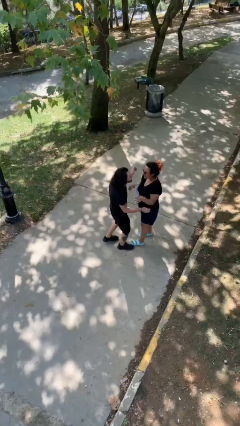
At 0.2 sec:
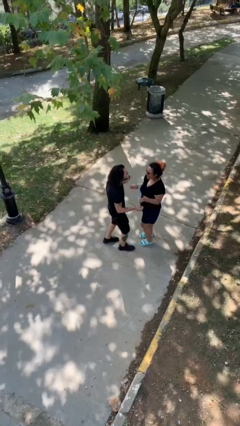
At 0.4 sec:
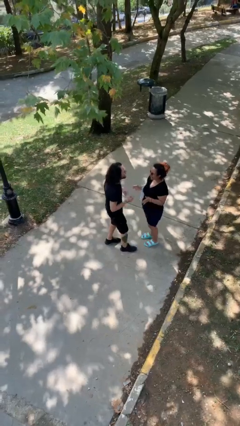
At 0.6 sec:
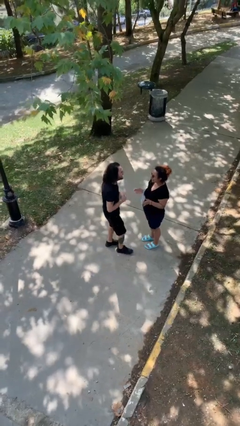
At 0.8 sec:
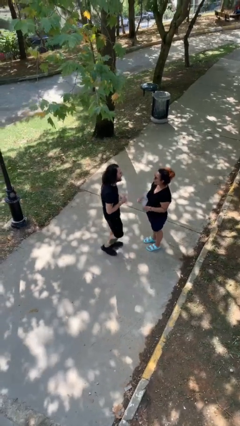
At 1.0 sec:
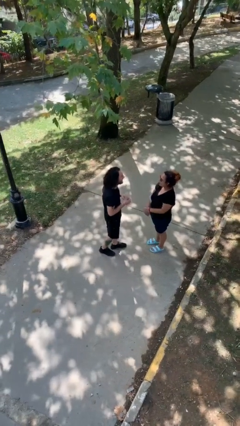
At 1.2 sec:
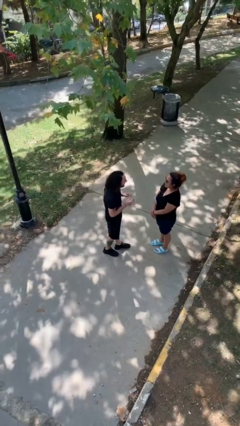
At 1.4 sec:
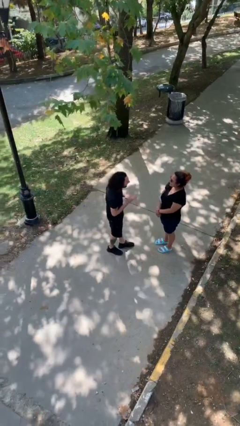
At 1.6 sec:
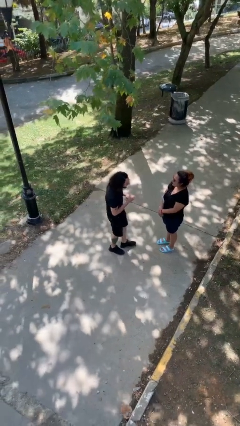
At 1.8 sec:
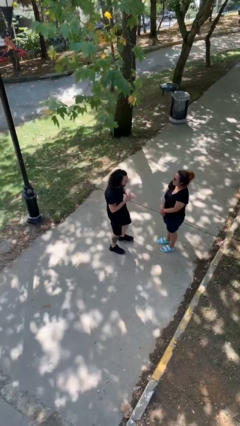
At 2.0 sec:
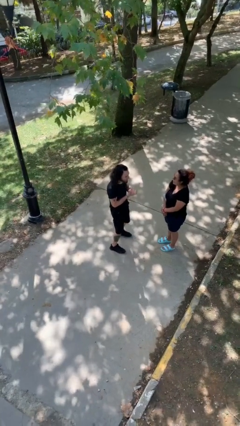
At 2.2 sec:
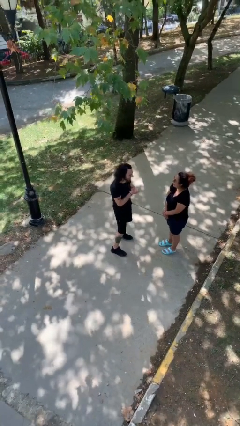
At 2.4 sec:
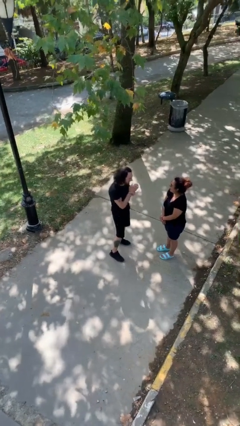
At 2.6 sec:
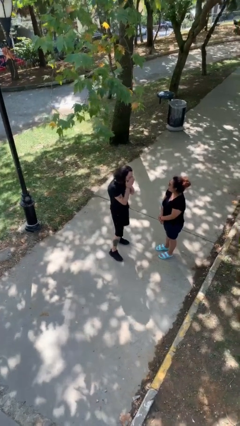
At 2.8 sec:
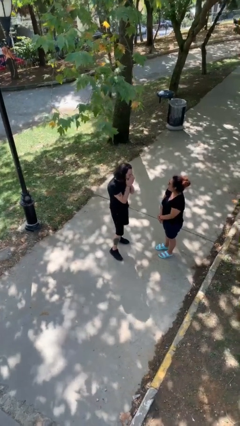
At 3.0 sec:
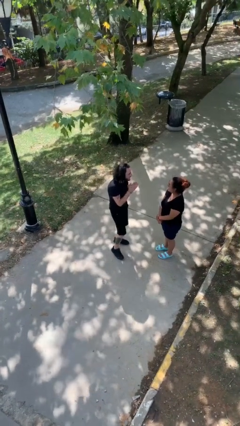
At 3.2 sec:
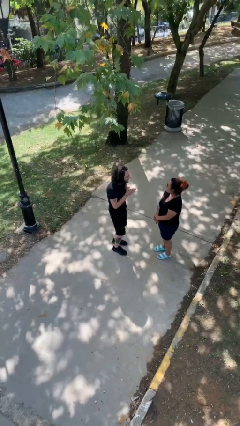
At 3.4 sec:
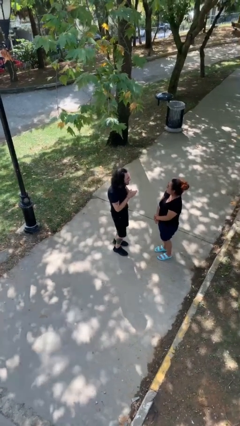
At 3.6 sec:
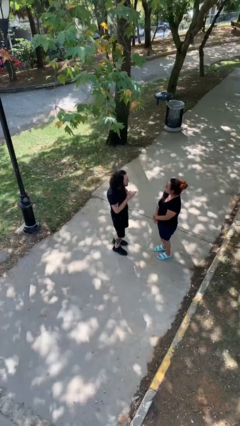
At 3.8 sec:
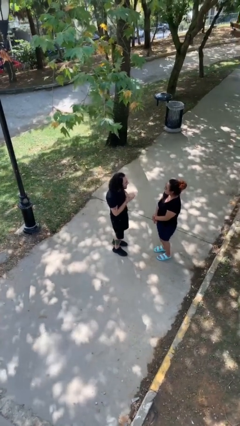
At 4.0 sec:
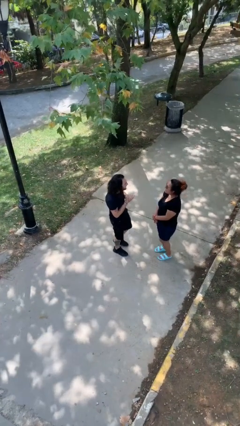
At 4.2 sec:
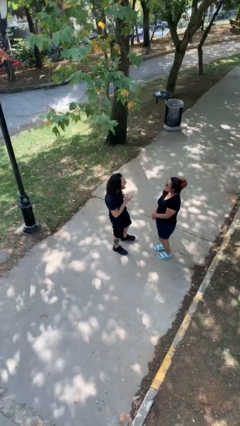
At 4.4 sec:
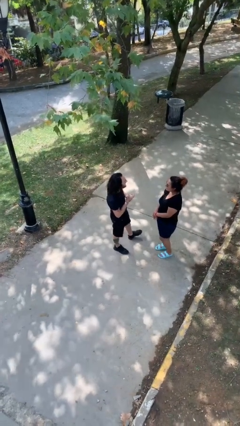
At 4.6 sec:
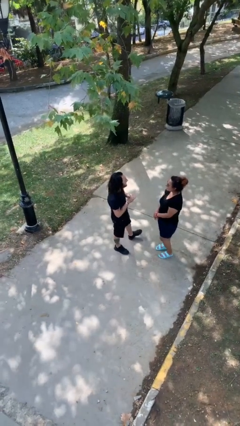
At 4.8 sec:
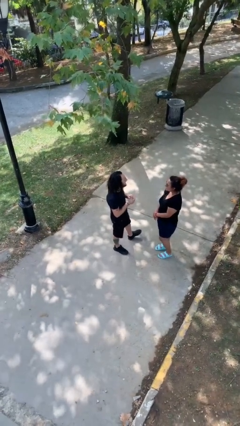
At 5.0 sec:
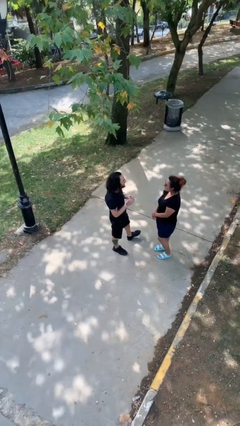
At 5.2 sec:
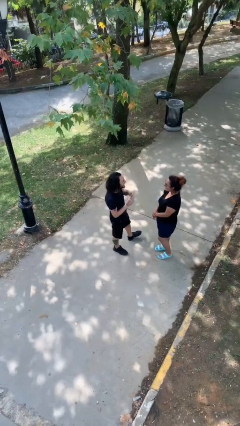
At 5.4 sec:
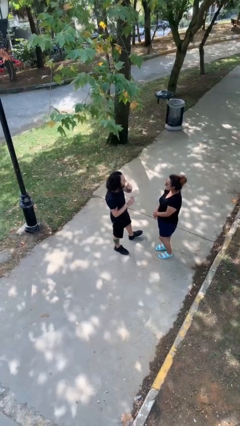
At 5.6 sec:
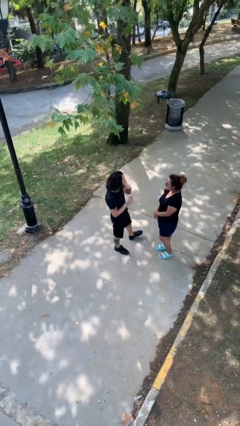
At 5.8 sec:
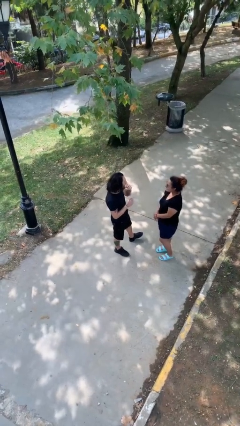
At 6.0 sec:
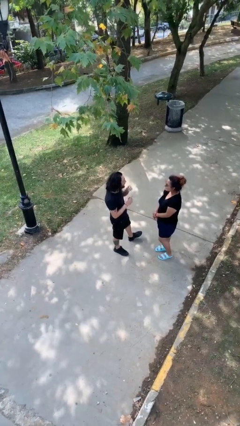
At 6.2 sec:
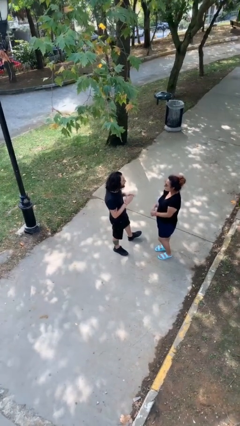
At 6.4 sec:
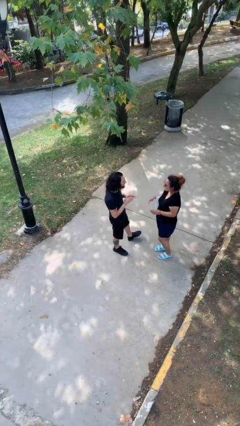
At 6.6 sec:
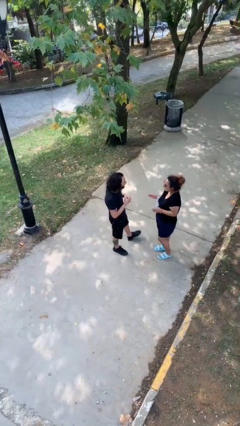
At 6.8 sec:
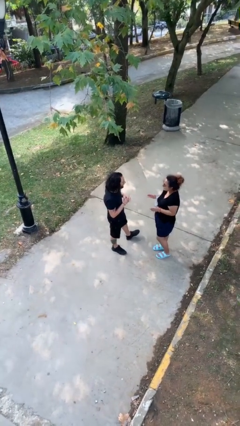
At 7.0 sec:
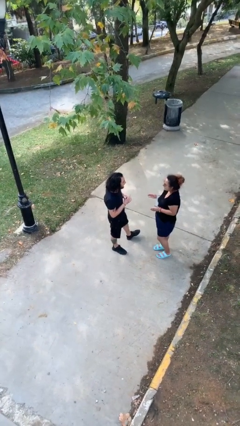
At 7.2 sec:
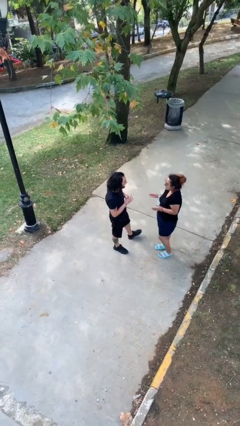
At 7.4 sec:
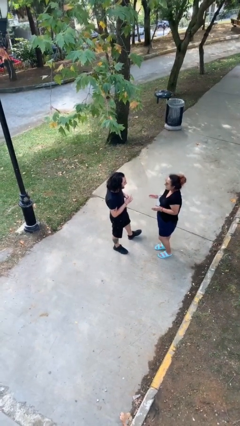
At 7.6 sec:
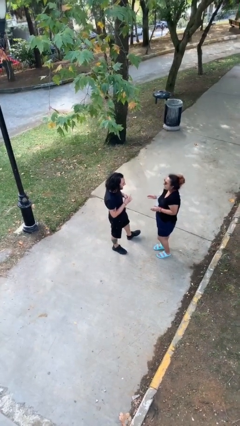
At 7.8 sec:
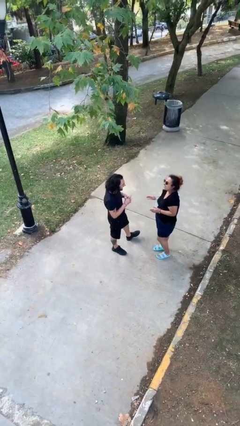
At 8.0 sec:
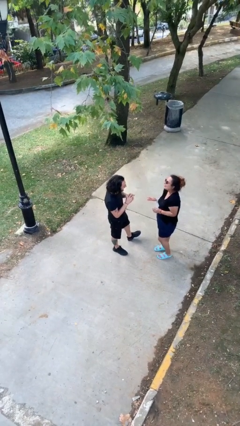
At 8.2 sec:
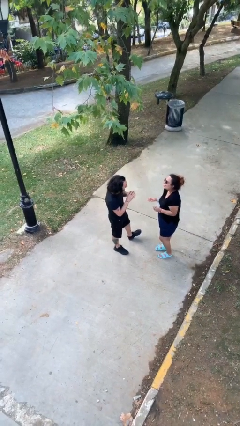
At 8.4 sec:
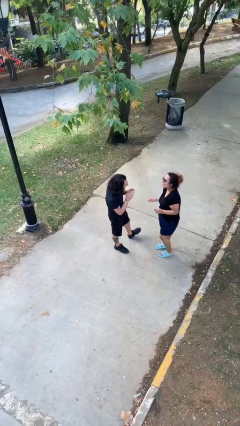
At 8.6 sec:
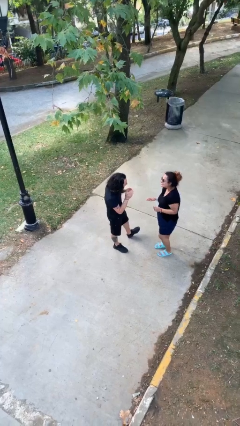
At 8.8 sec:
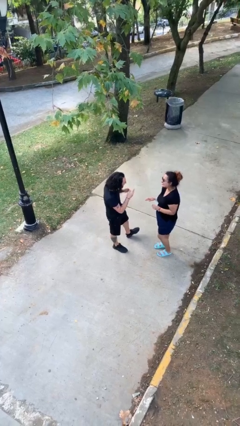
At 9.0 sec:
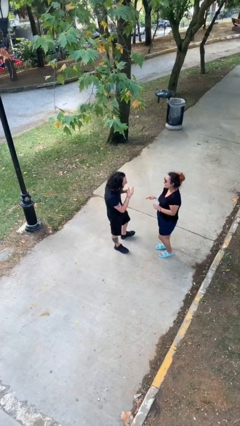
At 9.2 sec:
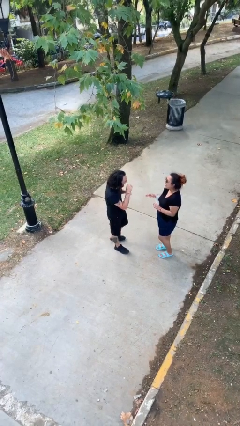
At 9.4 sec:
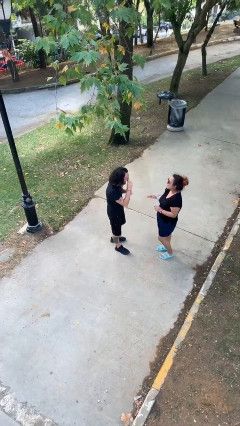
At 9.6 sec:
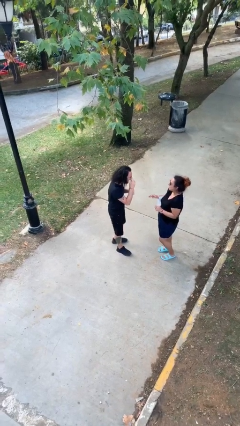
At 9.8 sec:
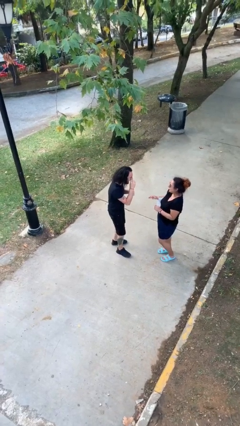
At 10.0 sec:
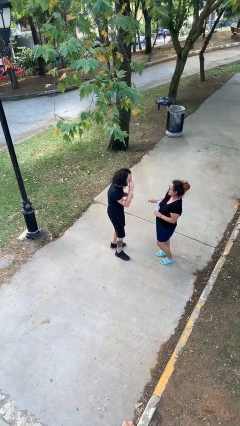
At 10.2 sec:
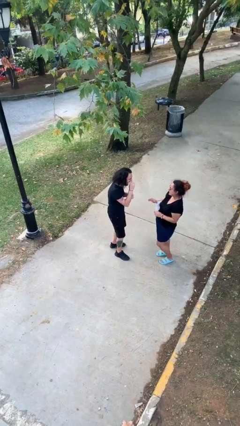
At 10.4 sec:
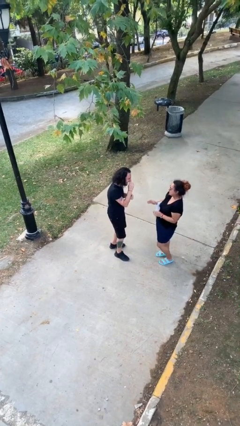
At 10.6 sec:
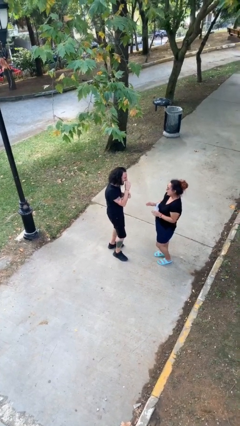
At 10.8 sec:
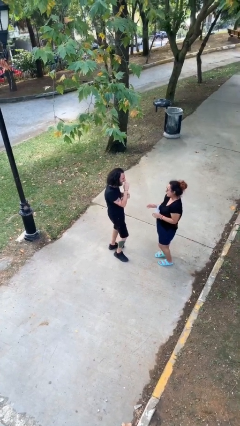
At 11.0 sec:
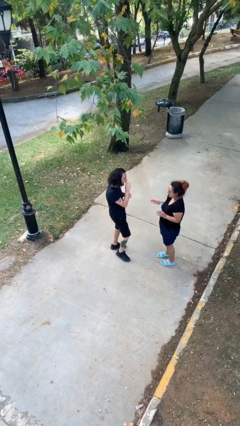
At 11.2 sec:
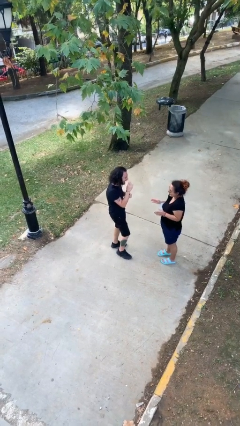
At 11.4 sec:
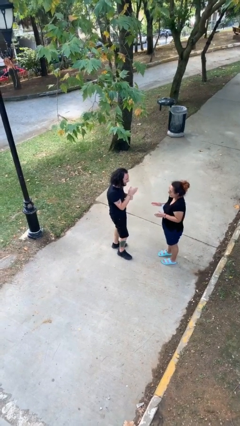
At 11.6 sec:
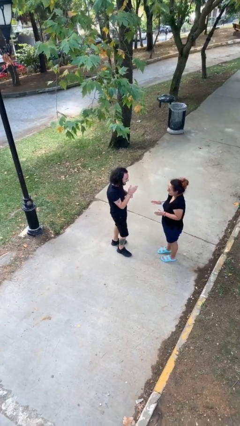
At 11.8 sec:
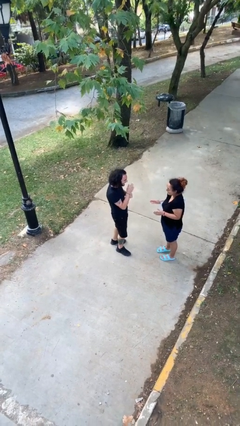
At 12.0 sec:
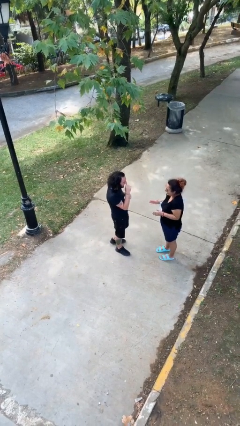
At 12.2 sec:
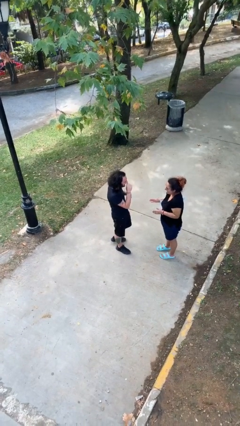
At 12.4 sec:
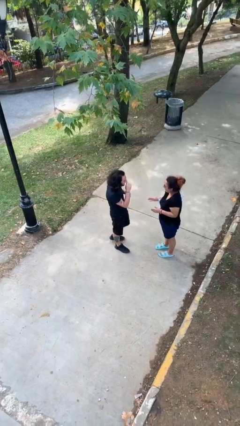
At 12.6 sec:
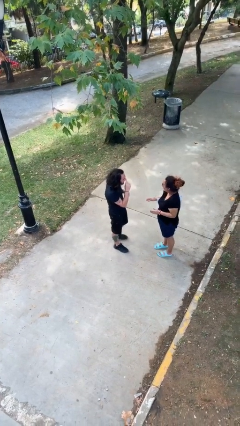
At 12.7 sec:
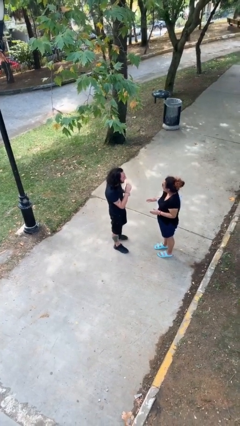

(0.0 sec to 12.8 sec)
person talks to person

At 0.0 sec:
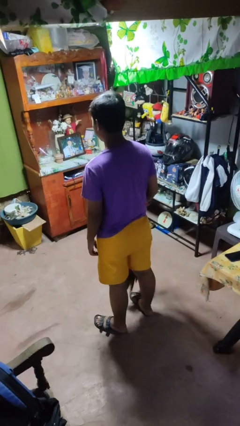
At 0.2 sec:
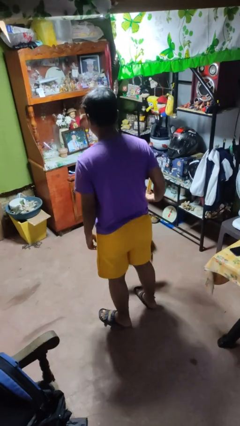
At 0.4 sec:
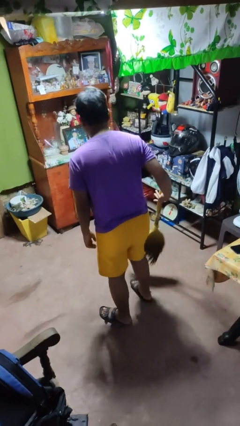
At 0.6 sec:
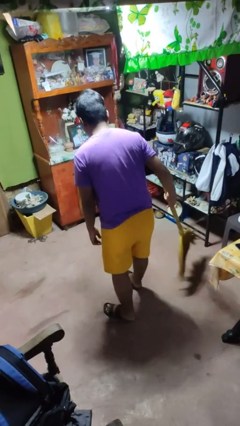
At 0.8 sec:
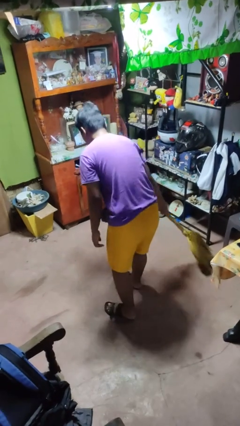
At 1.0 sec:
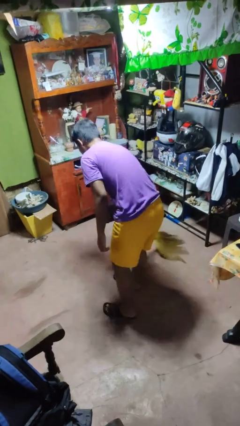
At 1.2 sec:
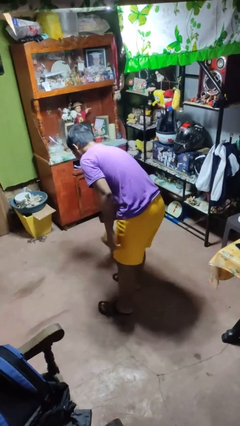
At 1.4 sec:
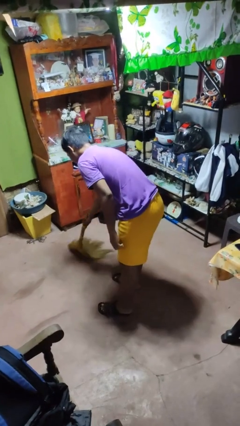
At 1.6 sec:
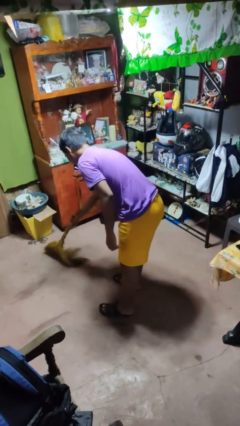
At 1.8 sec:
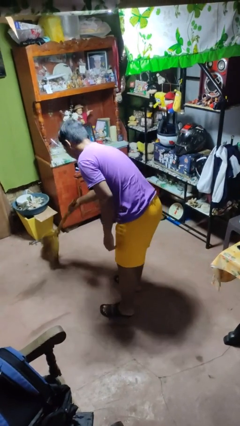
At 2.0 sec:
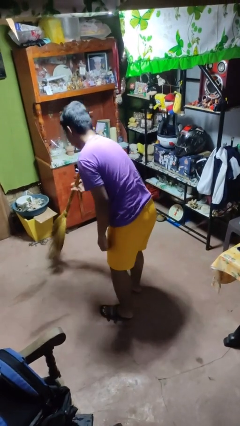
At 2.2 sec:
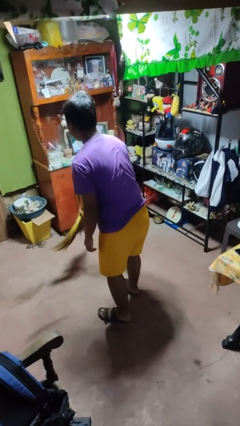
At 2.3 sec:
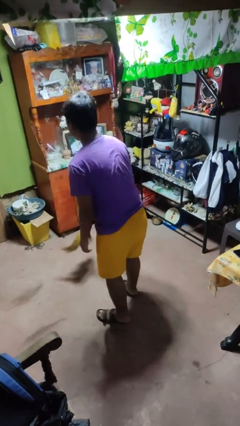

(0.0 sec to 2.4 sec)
person sweeps floor

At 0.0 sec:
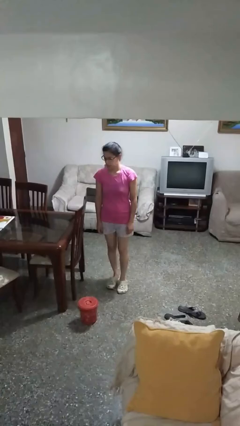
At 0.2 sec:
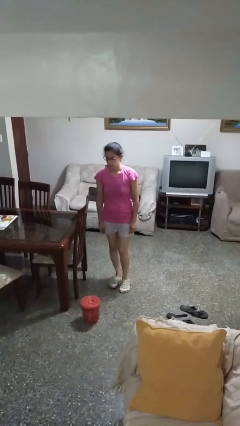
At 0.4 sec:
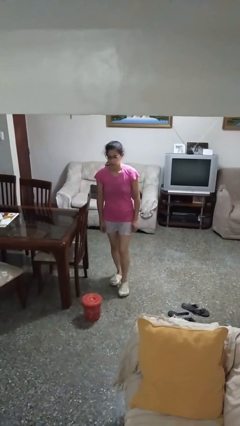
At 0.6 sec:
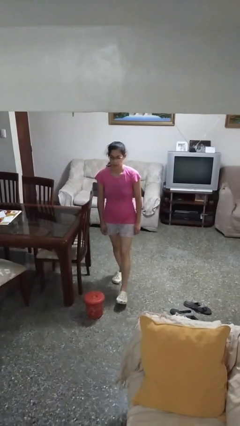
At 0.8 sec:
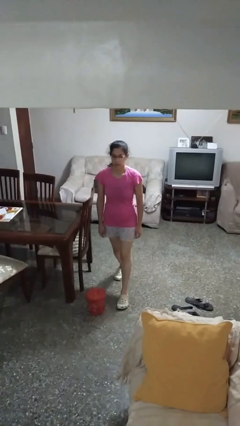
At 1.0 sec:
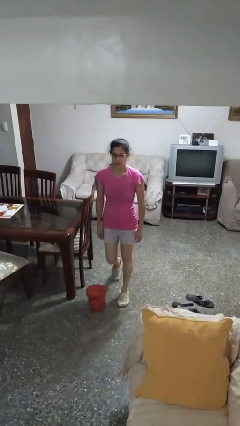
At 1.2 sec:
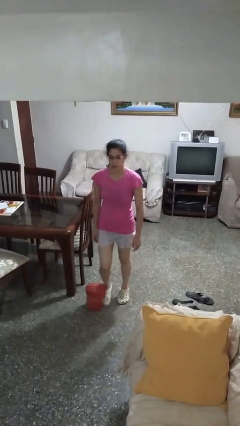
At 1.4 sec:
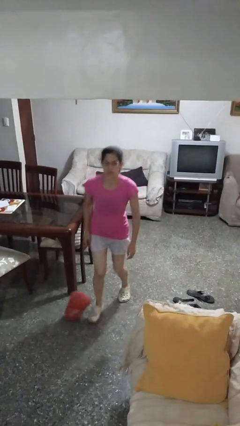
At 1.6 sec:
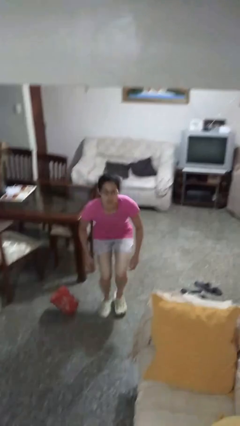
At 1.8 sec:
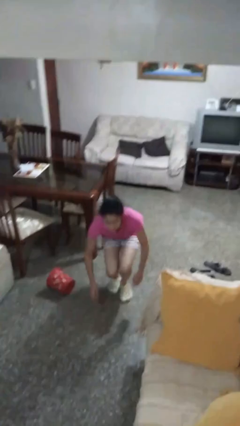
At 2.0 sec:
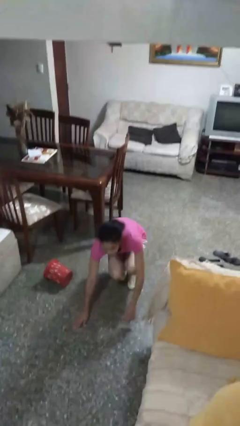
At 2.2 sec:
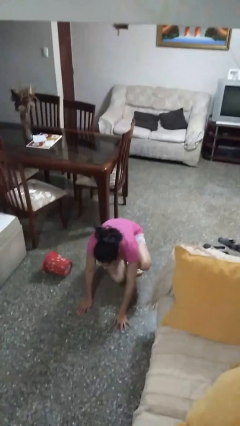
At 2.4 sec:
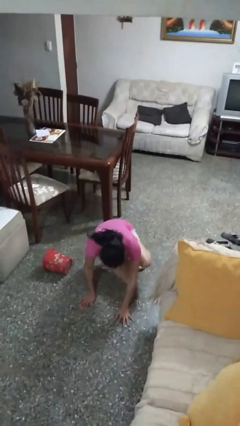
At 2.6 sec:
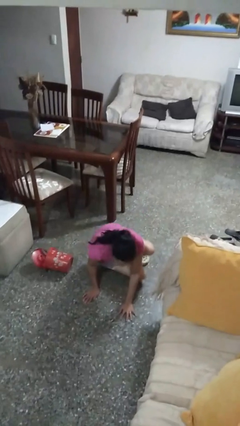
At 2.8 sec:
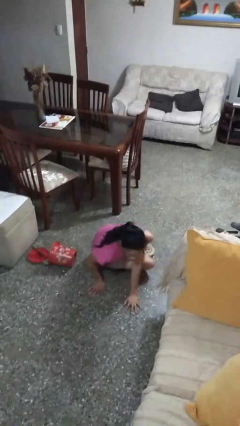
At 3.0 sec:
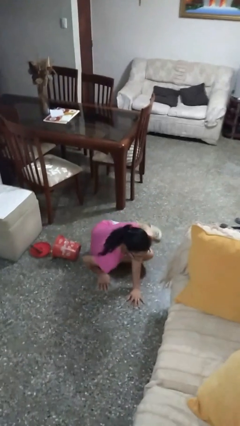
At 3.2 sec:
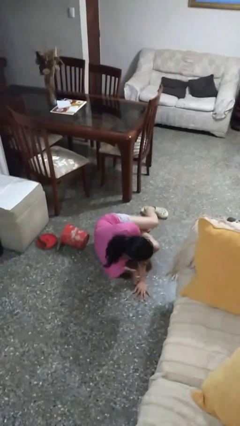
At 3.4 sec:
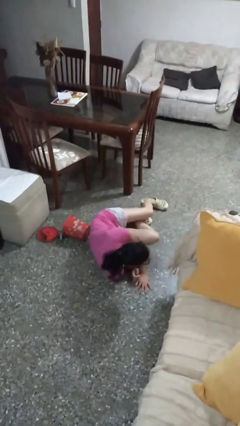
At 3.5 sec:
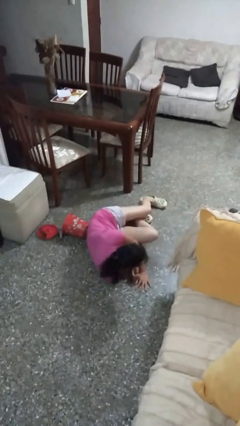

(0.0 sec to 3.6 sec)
person trips on object on floor
